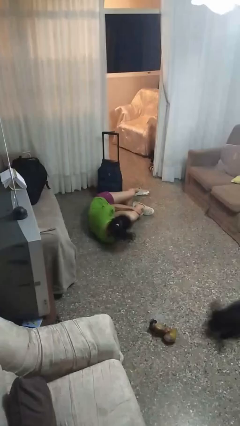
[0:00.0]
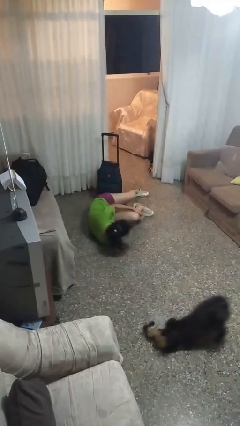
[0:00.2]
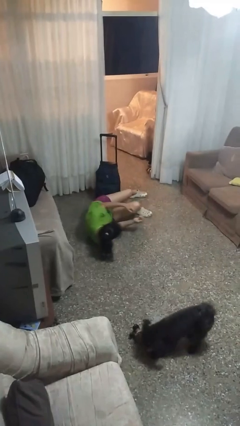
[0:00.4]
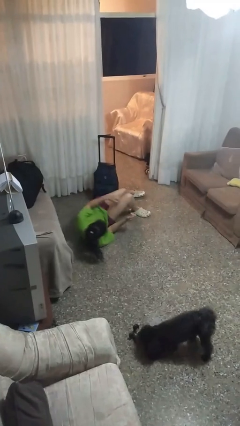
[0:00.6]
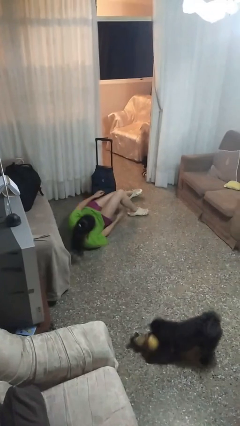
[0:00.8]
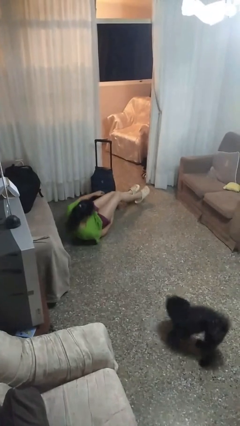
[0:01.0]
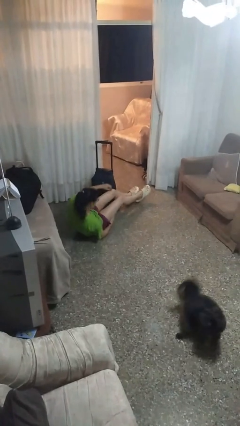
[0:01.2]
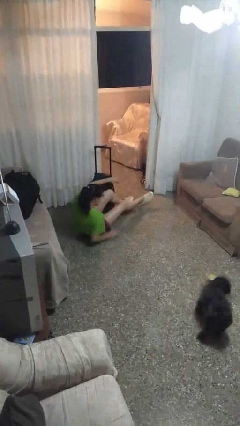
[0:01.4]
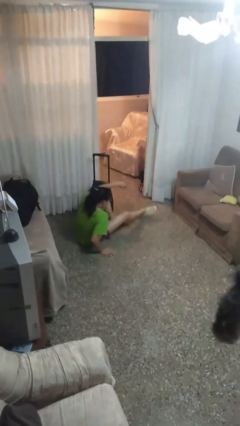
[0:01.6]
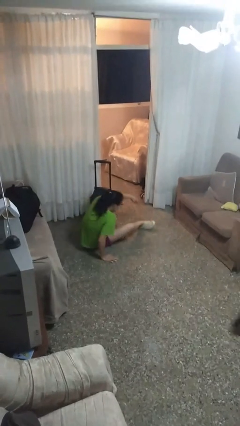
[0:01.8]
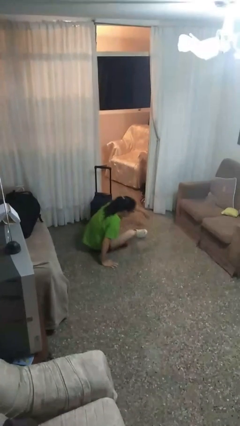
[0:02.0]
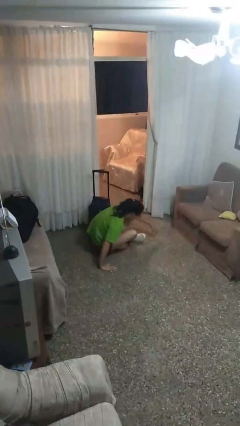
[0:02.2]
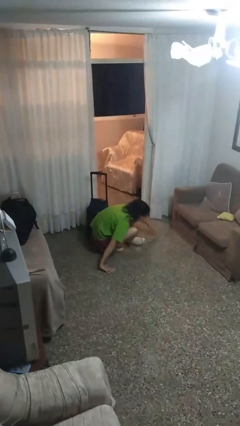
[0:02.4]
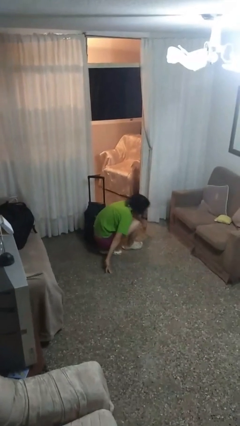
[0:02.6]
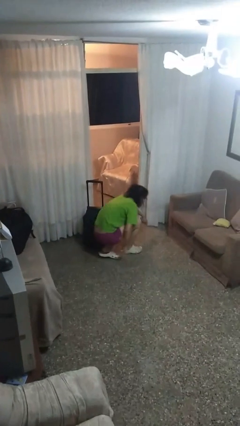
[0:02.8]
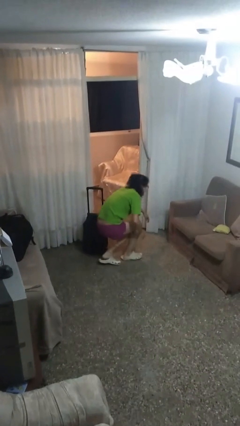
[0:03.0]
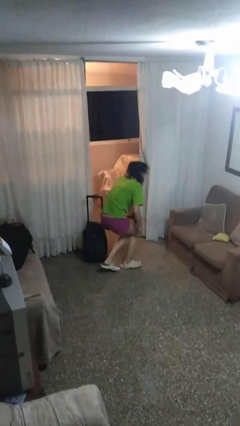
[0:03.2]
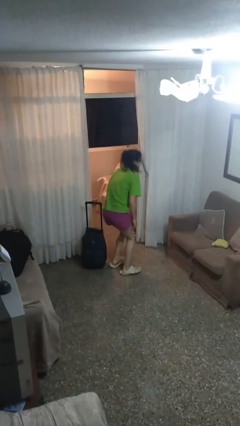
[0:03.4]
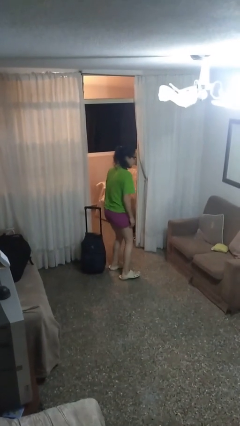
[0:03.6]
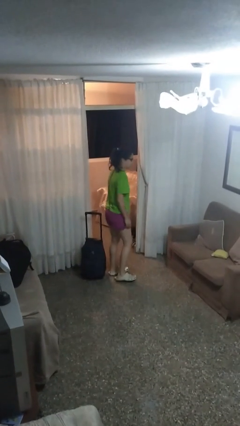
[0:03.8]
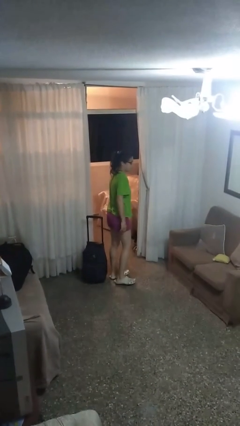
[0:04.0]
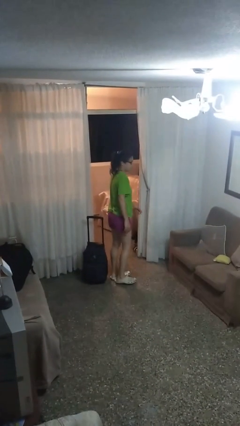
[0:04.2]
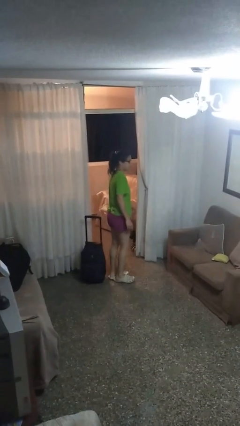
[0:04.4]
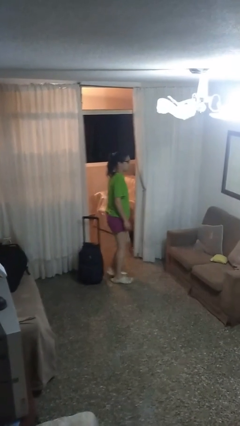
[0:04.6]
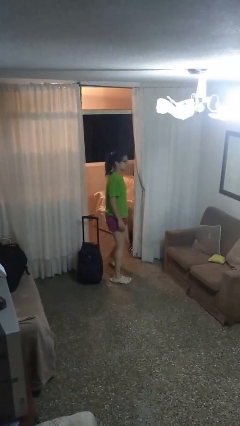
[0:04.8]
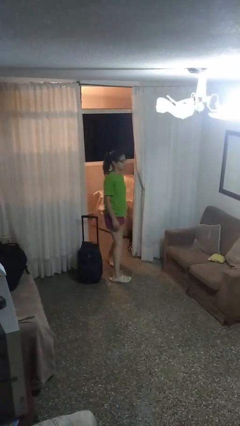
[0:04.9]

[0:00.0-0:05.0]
person stands up from floor

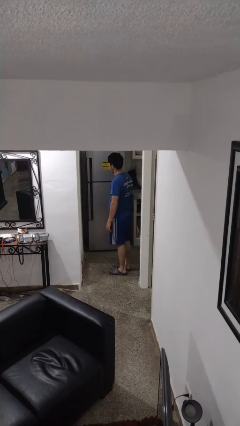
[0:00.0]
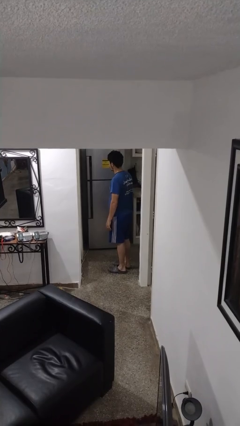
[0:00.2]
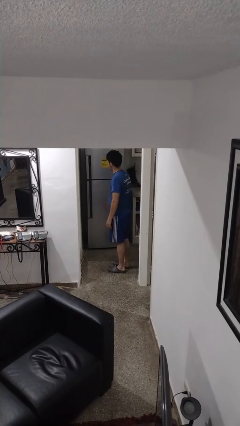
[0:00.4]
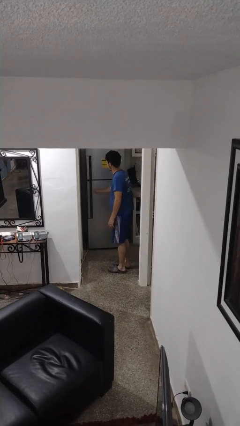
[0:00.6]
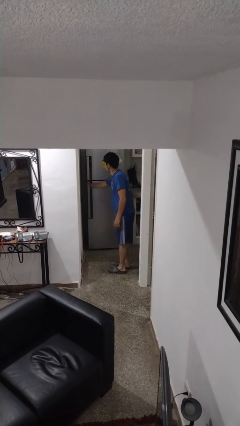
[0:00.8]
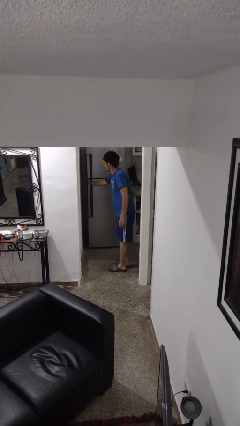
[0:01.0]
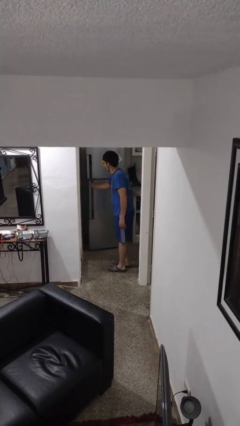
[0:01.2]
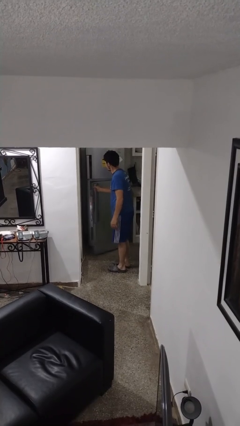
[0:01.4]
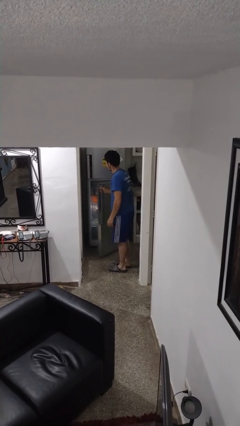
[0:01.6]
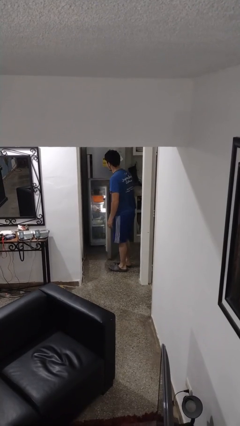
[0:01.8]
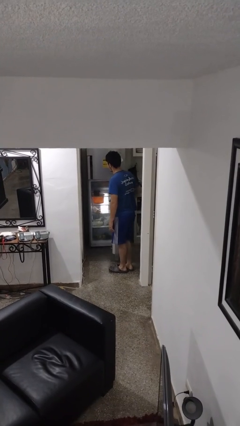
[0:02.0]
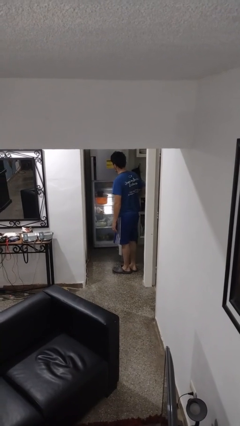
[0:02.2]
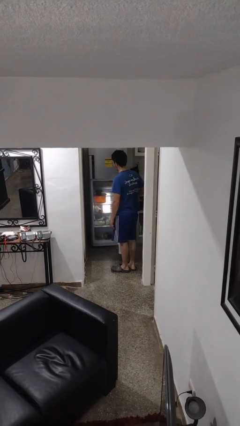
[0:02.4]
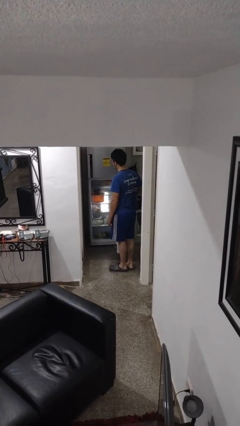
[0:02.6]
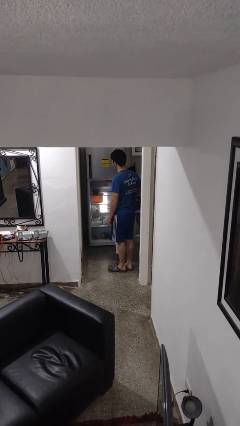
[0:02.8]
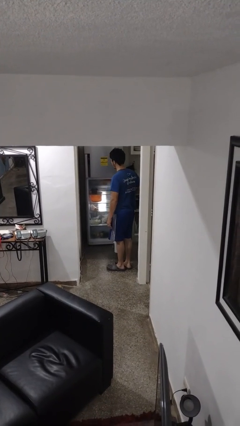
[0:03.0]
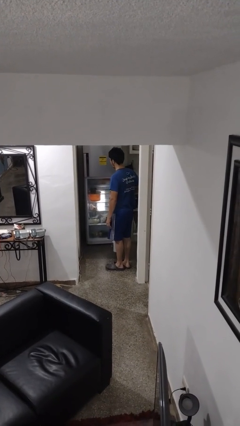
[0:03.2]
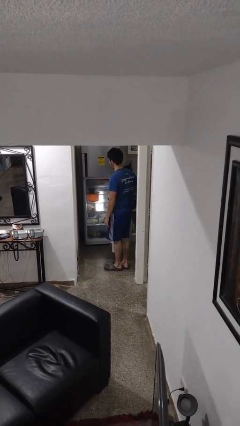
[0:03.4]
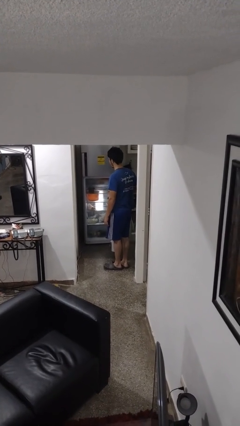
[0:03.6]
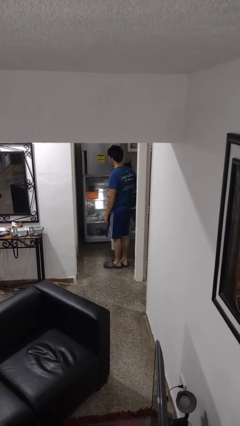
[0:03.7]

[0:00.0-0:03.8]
person opens refrigerator

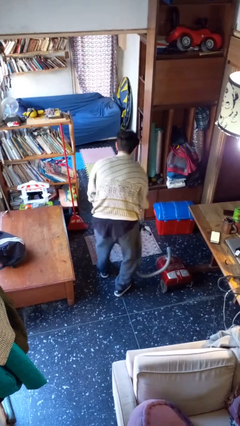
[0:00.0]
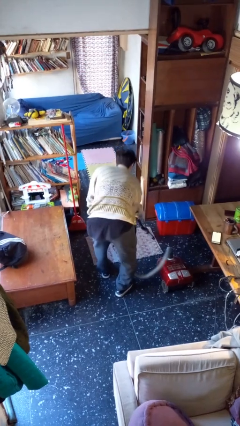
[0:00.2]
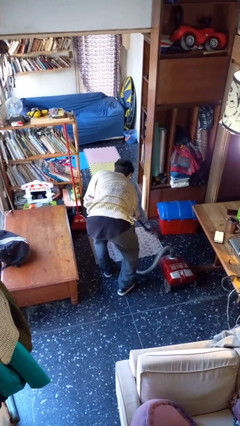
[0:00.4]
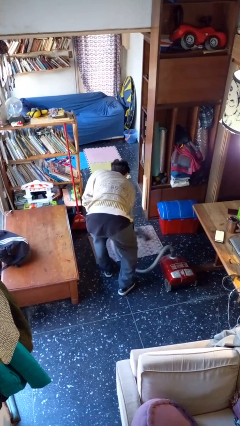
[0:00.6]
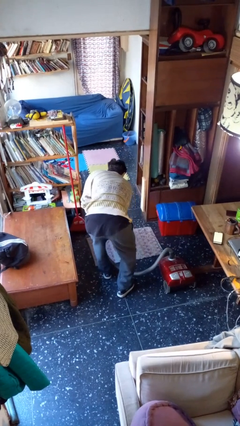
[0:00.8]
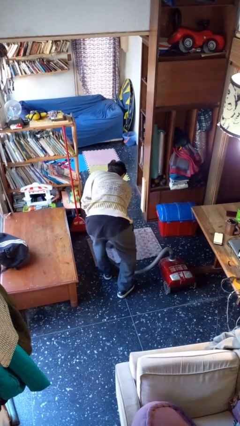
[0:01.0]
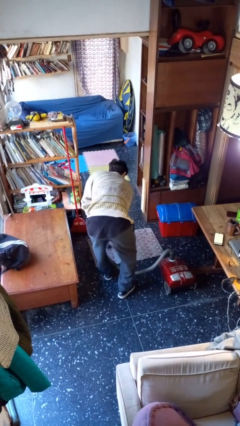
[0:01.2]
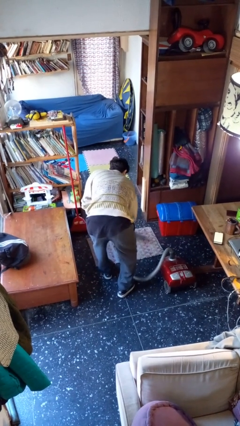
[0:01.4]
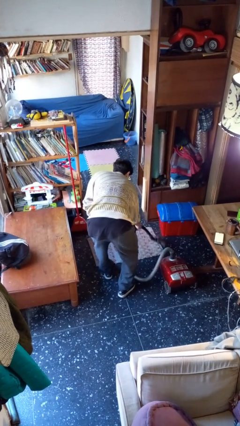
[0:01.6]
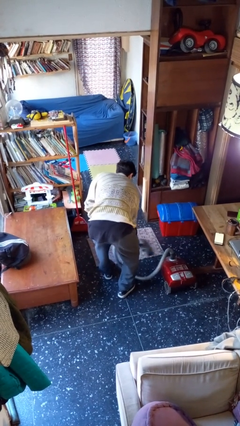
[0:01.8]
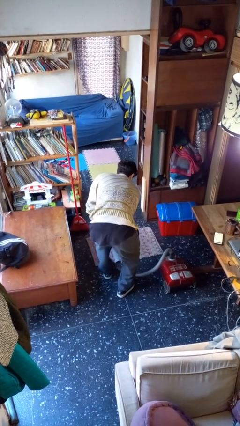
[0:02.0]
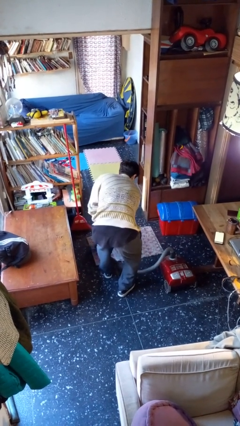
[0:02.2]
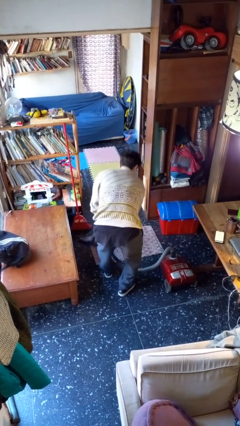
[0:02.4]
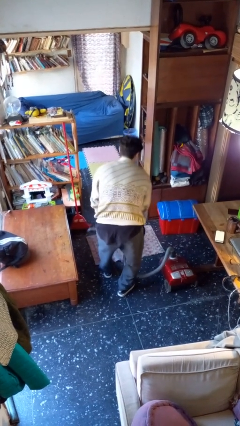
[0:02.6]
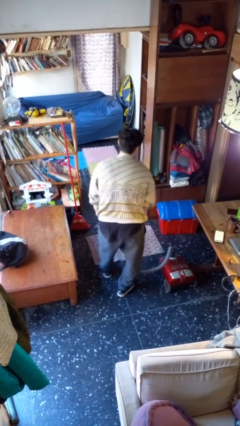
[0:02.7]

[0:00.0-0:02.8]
person vacuums carpet

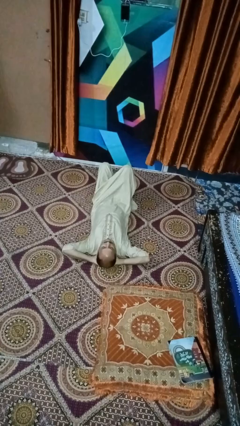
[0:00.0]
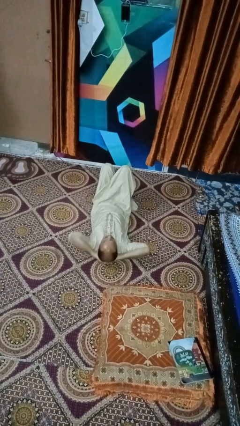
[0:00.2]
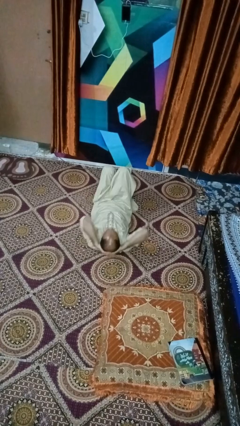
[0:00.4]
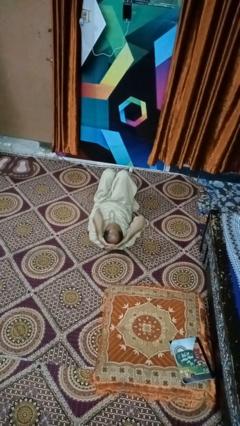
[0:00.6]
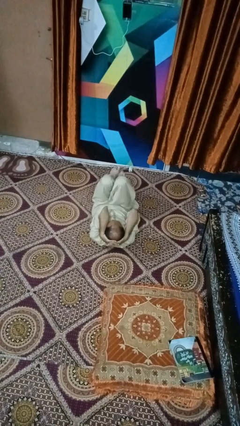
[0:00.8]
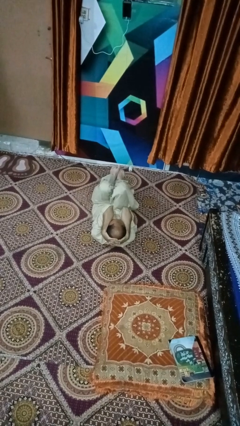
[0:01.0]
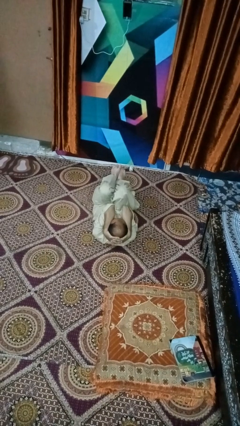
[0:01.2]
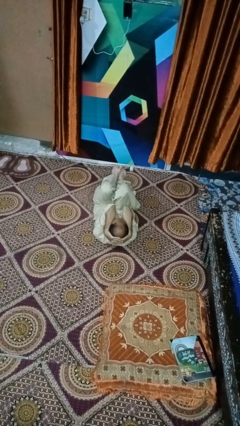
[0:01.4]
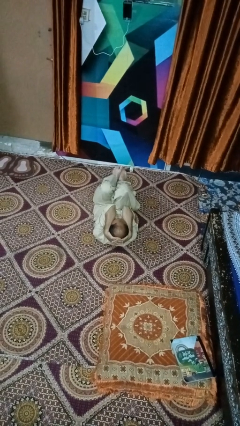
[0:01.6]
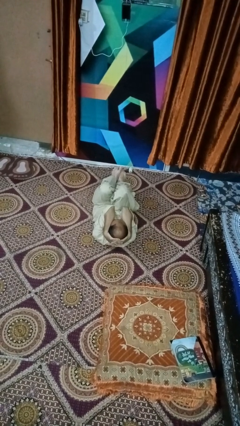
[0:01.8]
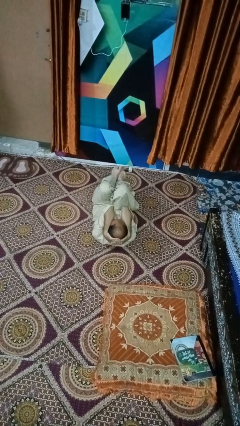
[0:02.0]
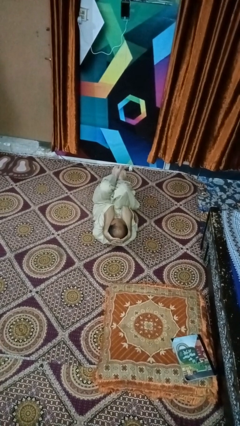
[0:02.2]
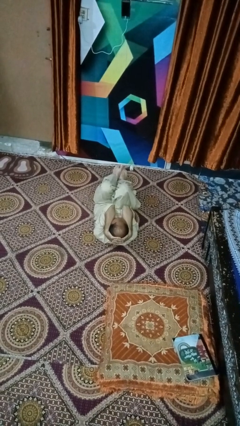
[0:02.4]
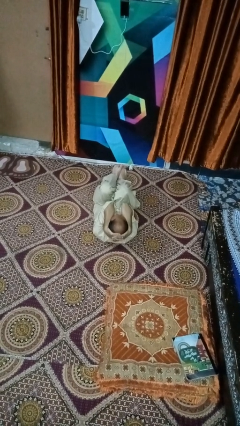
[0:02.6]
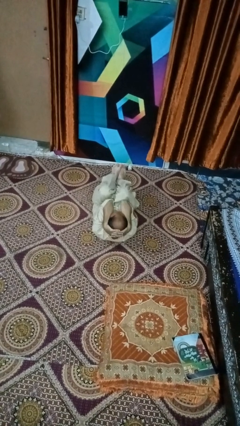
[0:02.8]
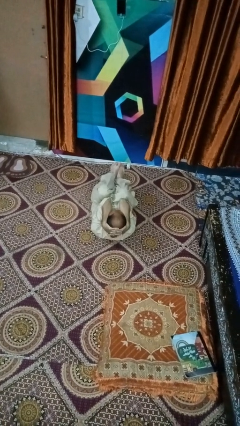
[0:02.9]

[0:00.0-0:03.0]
person exercises with situp

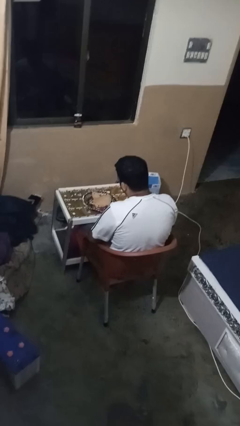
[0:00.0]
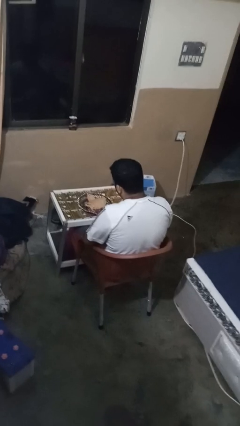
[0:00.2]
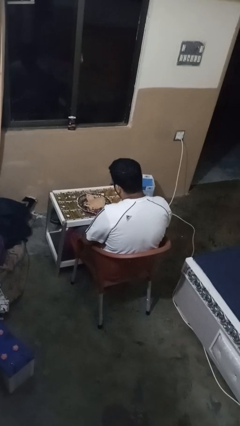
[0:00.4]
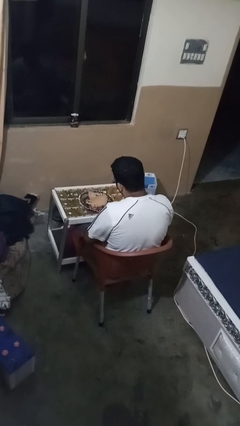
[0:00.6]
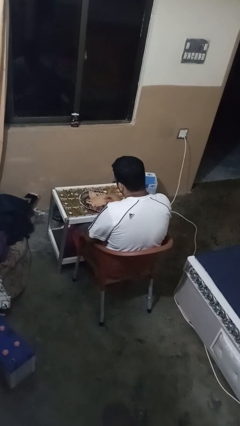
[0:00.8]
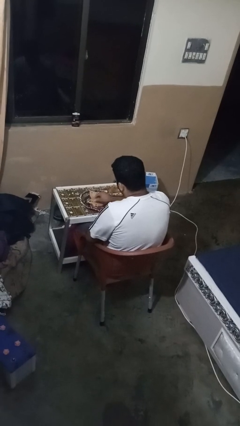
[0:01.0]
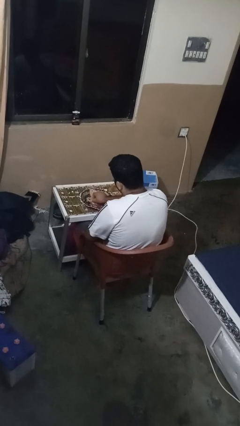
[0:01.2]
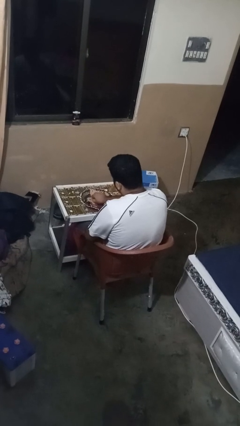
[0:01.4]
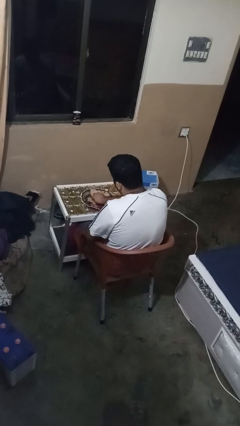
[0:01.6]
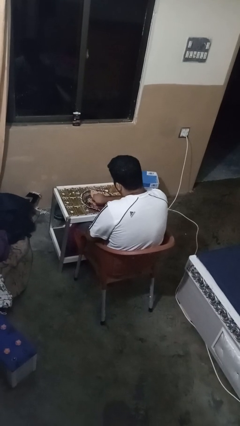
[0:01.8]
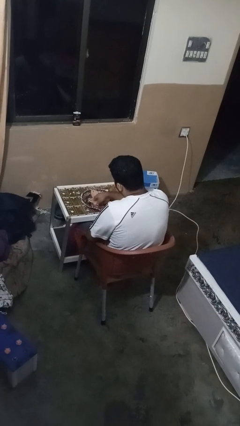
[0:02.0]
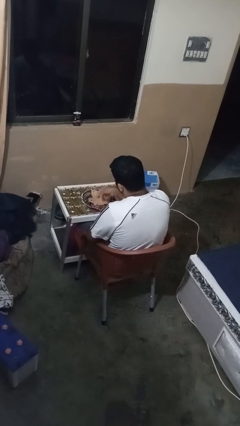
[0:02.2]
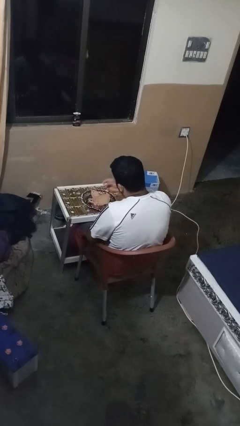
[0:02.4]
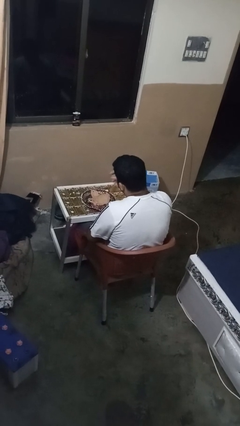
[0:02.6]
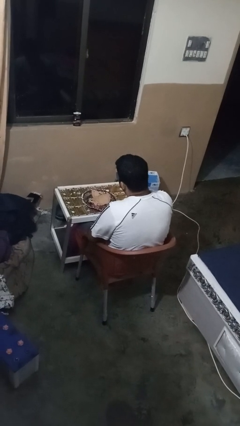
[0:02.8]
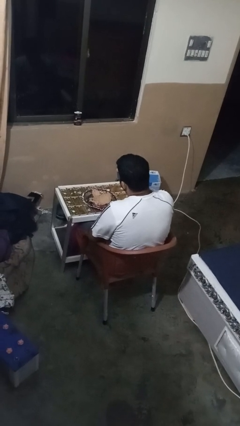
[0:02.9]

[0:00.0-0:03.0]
person eats with hands
